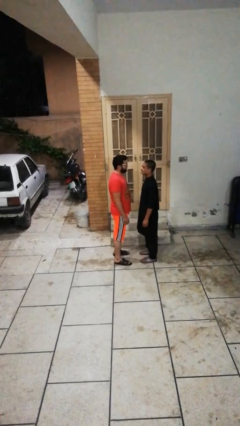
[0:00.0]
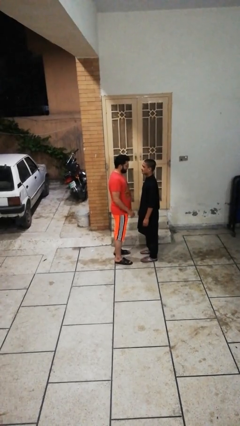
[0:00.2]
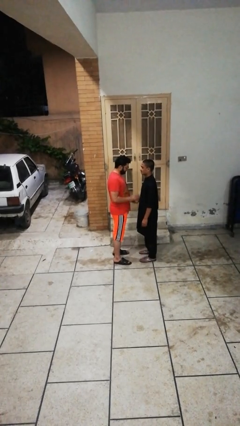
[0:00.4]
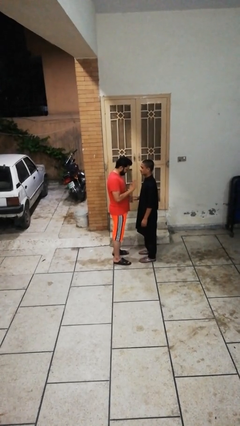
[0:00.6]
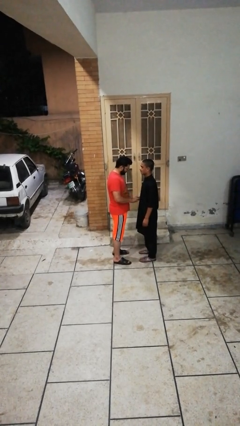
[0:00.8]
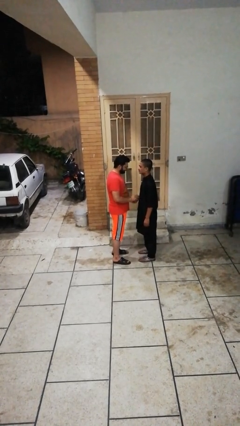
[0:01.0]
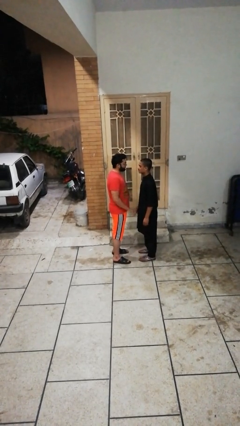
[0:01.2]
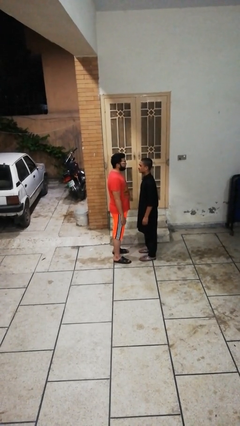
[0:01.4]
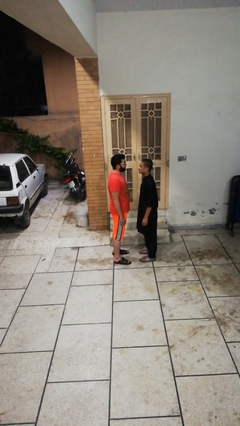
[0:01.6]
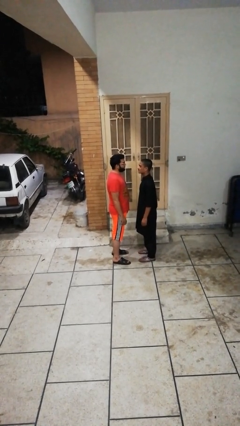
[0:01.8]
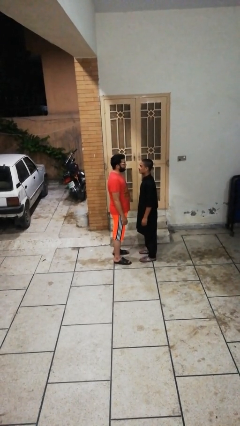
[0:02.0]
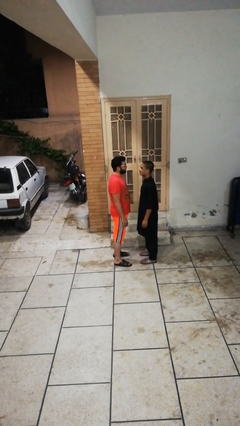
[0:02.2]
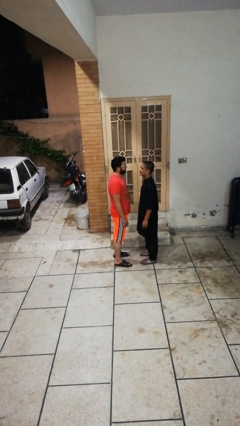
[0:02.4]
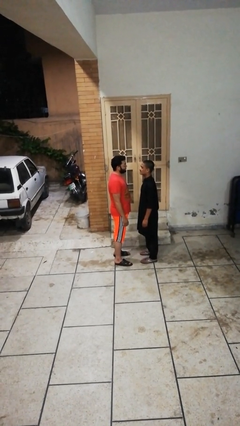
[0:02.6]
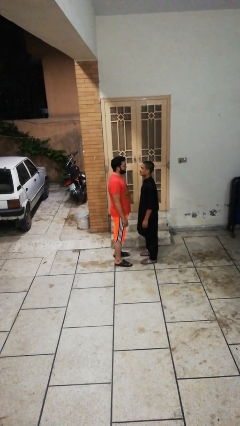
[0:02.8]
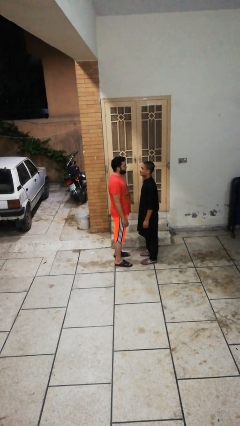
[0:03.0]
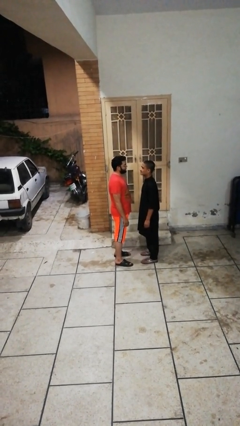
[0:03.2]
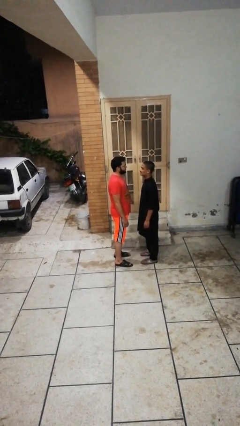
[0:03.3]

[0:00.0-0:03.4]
person highfives hand

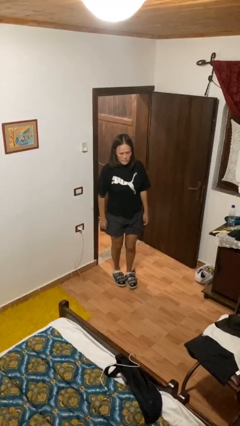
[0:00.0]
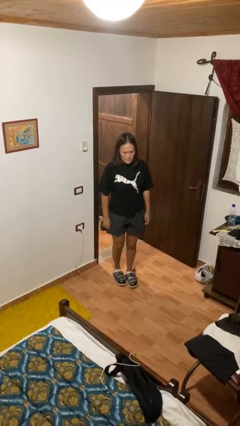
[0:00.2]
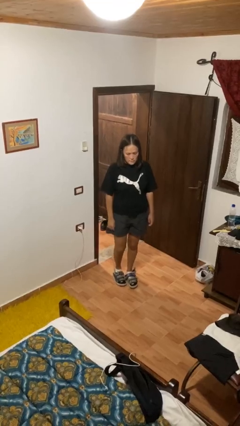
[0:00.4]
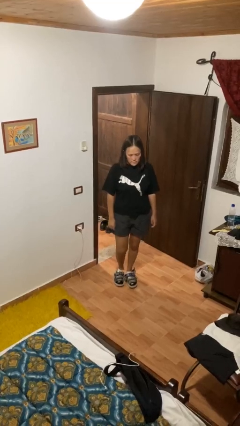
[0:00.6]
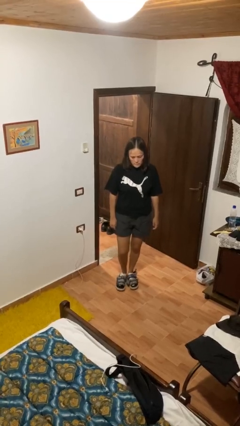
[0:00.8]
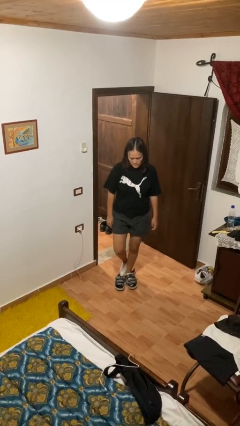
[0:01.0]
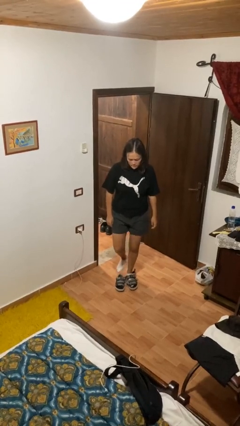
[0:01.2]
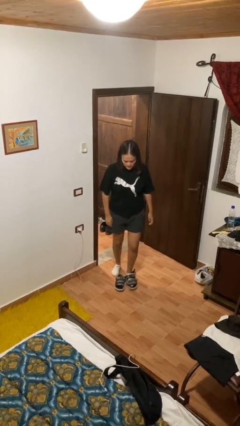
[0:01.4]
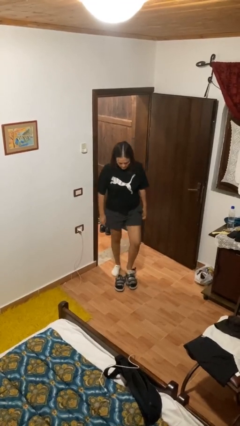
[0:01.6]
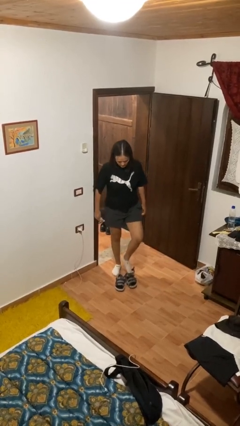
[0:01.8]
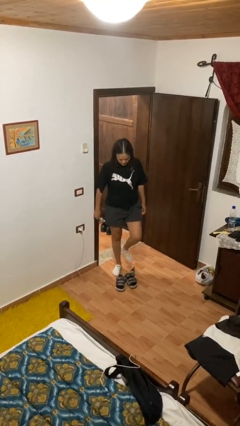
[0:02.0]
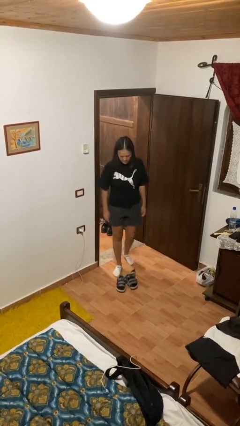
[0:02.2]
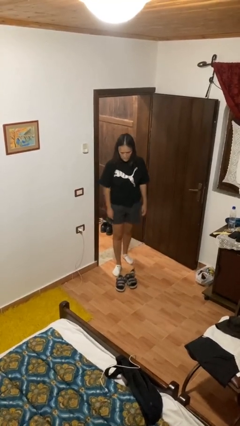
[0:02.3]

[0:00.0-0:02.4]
person takes off shoes

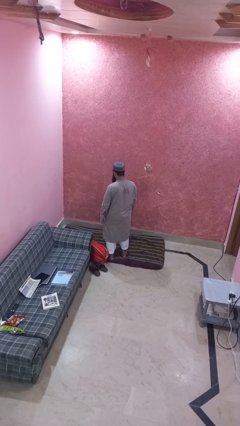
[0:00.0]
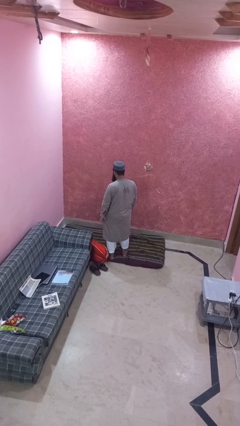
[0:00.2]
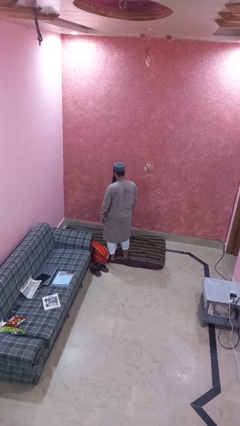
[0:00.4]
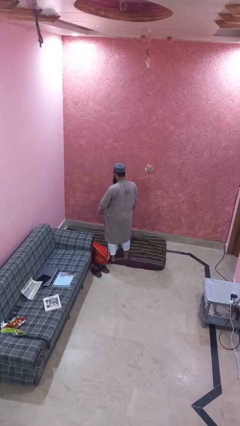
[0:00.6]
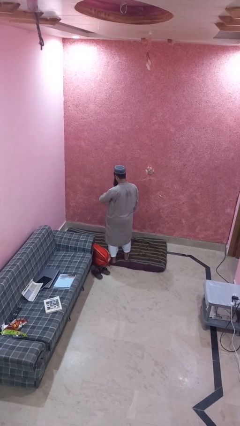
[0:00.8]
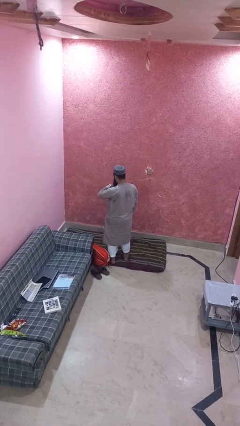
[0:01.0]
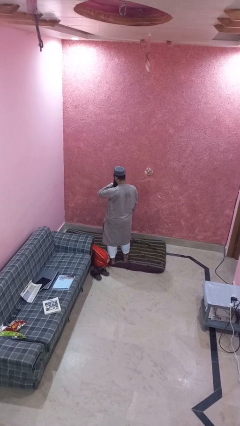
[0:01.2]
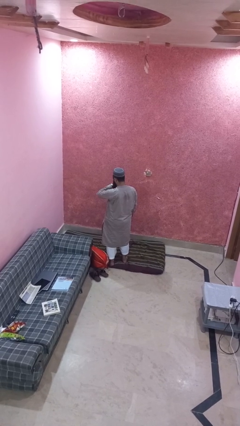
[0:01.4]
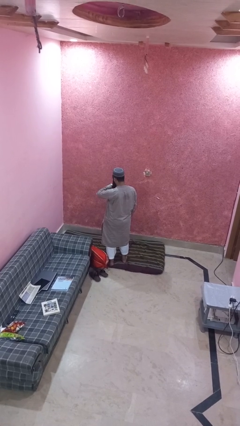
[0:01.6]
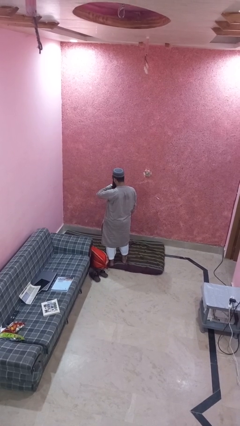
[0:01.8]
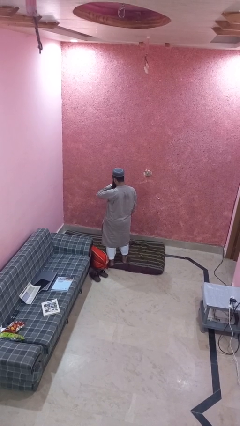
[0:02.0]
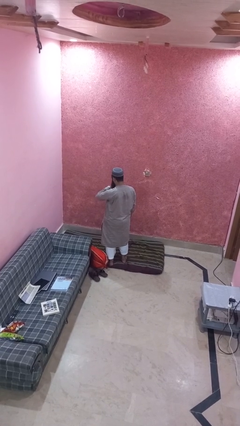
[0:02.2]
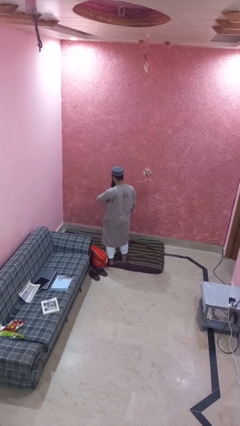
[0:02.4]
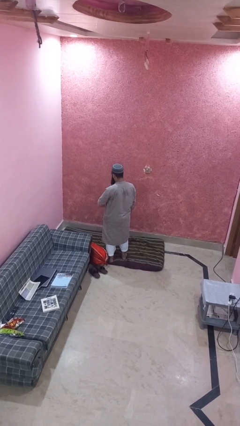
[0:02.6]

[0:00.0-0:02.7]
person looks at wristwatch

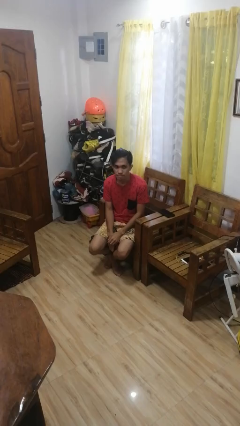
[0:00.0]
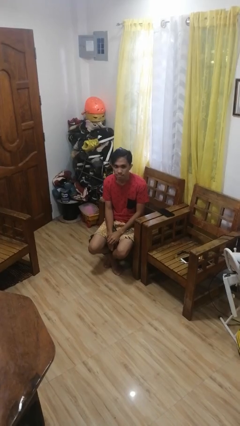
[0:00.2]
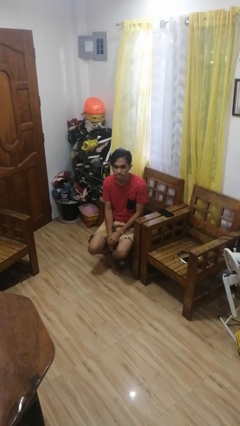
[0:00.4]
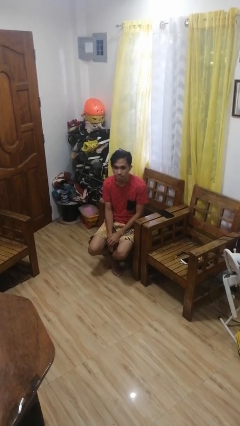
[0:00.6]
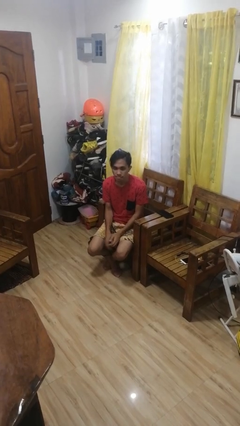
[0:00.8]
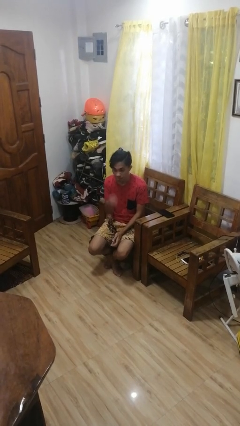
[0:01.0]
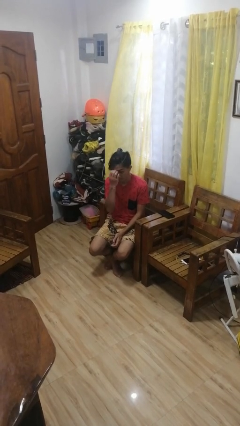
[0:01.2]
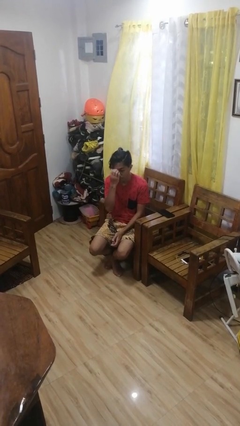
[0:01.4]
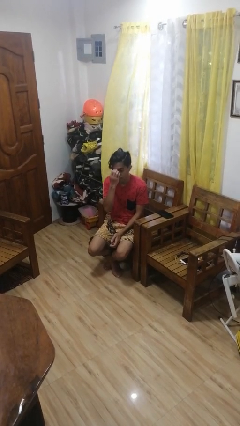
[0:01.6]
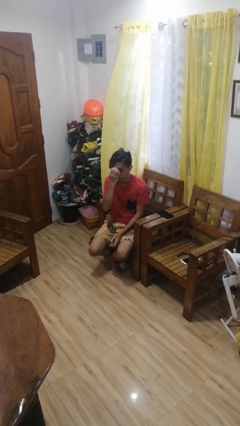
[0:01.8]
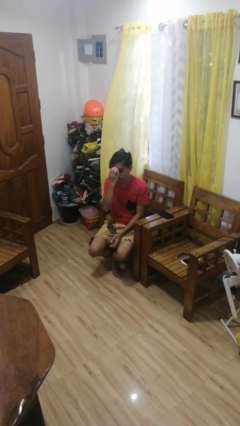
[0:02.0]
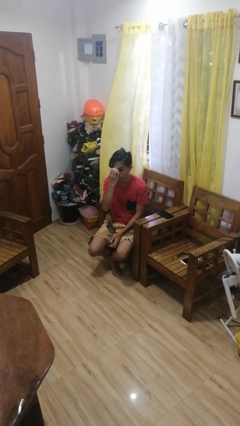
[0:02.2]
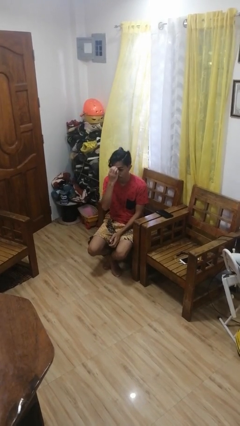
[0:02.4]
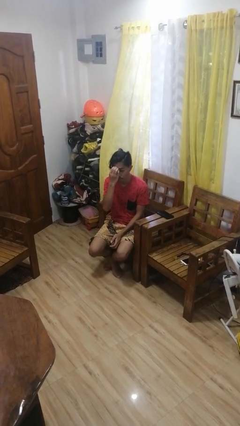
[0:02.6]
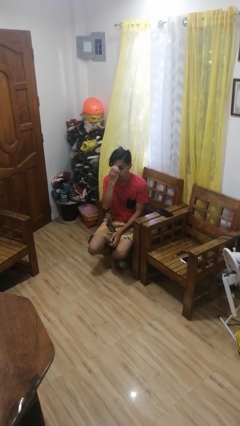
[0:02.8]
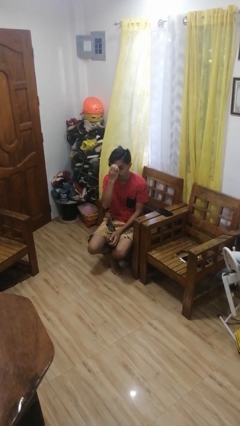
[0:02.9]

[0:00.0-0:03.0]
person scratches face

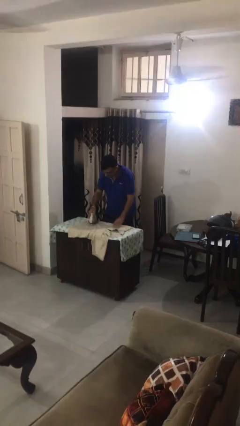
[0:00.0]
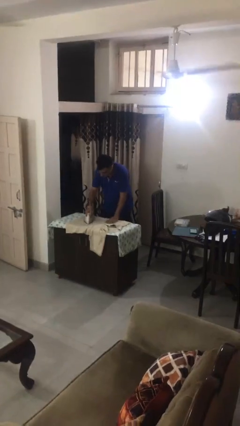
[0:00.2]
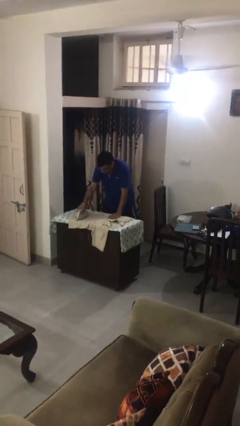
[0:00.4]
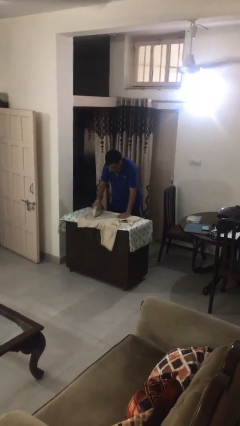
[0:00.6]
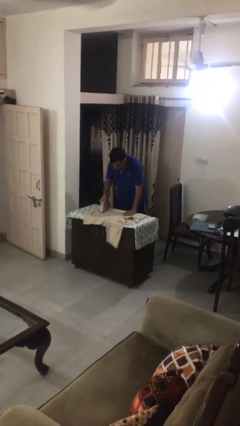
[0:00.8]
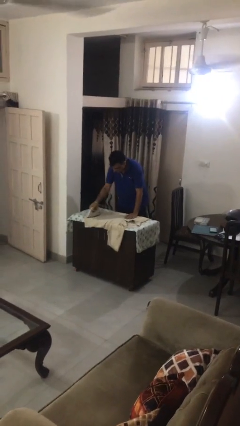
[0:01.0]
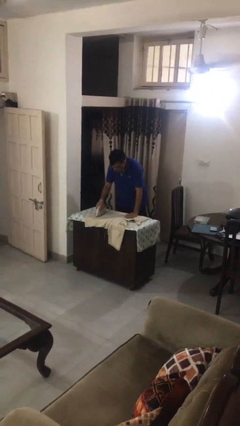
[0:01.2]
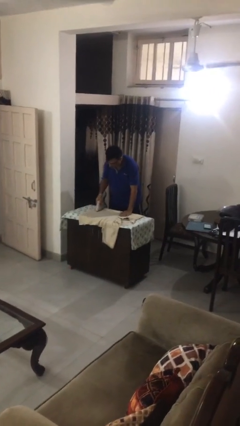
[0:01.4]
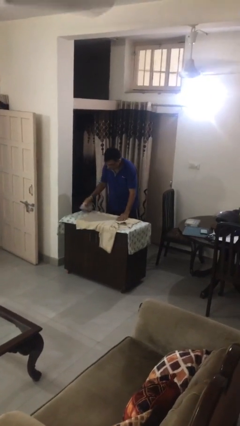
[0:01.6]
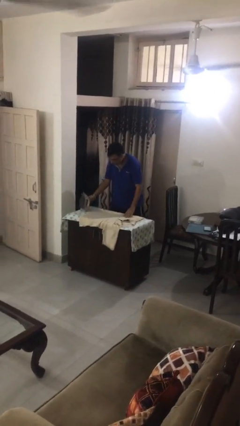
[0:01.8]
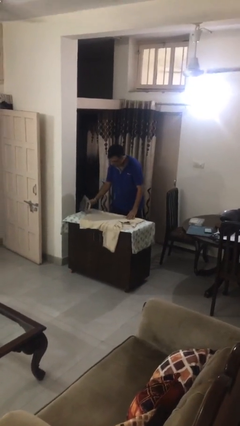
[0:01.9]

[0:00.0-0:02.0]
person irons clothes

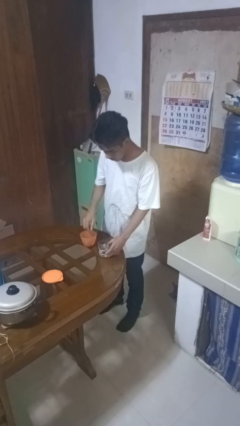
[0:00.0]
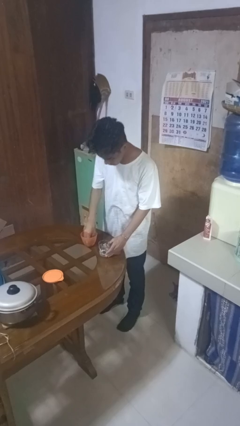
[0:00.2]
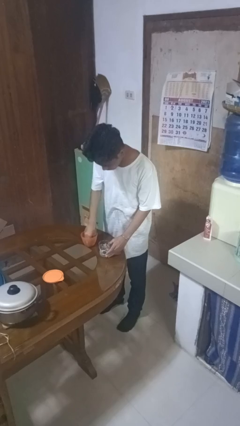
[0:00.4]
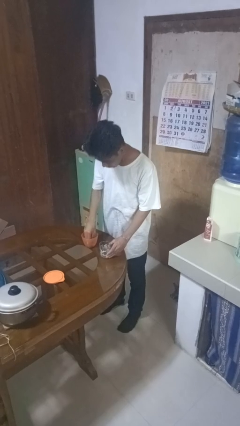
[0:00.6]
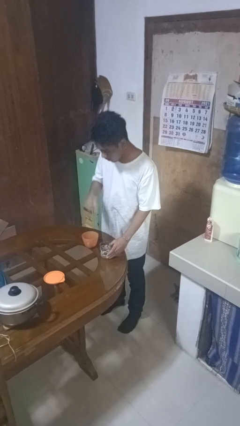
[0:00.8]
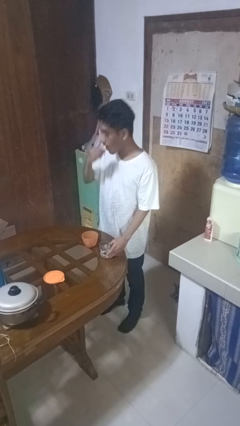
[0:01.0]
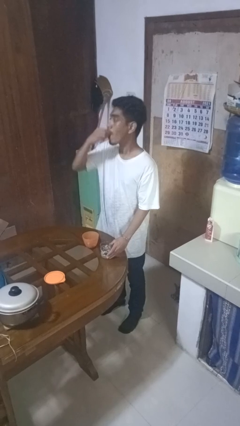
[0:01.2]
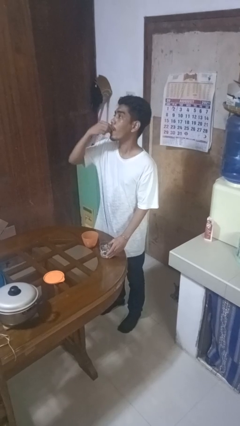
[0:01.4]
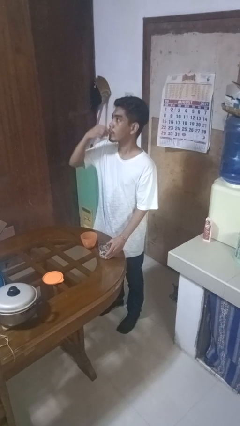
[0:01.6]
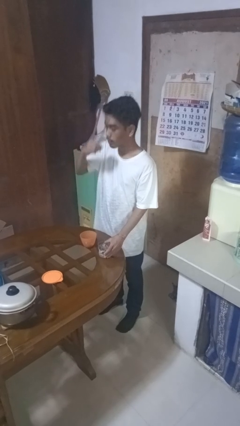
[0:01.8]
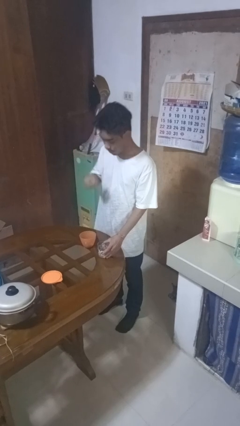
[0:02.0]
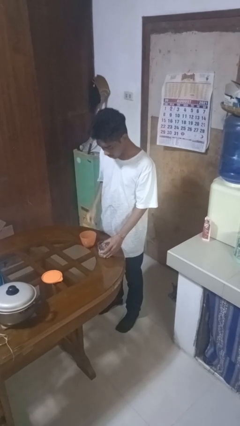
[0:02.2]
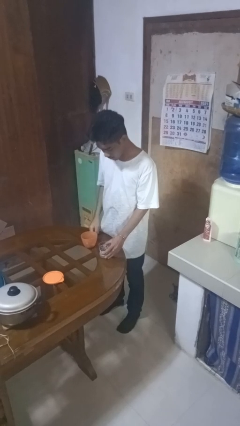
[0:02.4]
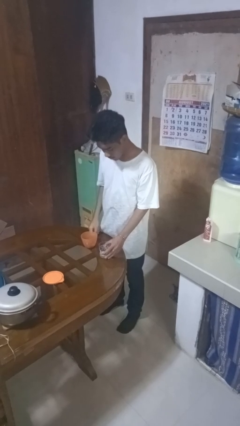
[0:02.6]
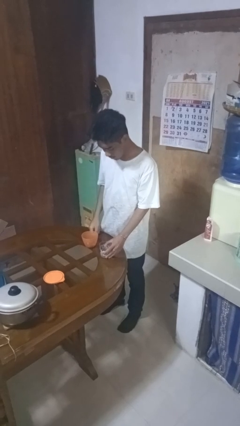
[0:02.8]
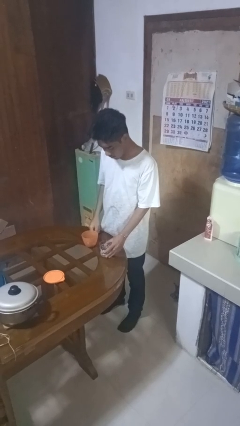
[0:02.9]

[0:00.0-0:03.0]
person takes medicine pills

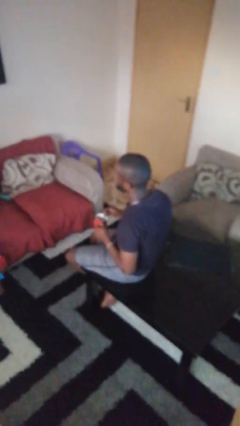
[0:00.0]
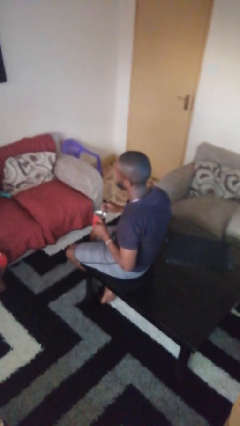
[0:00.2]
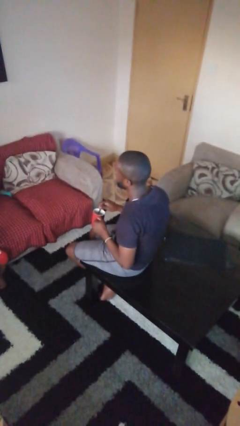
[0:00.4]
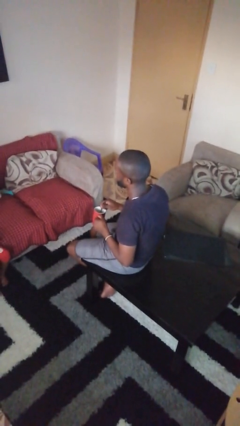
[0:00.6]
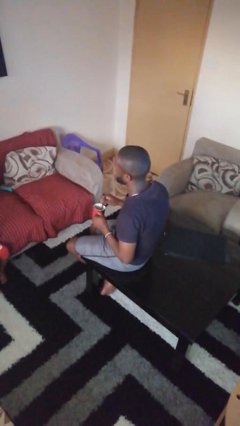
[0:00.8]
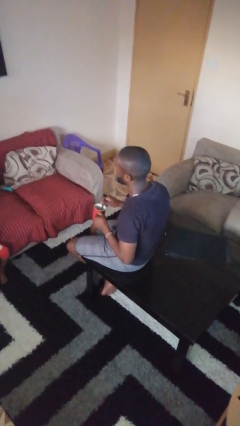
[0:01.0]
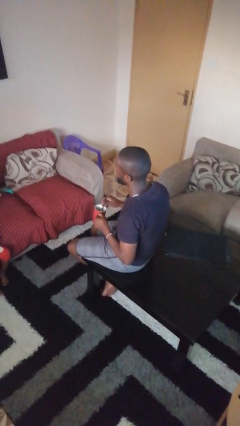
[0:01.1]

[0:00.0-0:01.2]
person stirs mug
